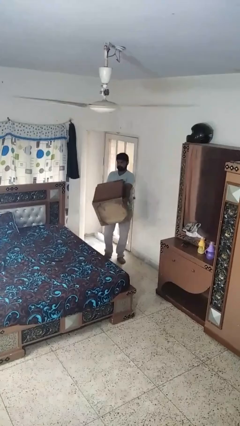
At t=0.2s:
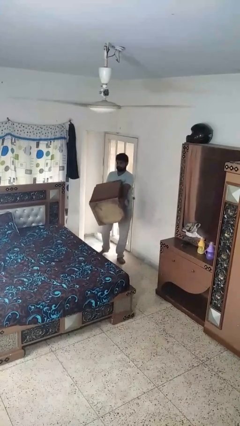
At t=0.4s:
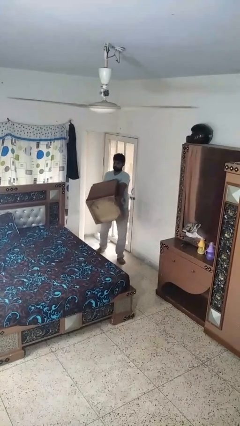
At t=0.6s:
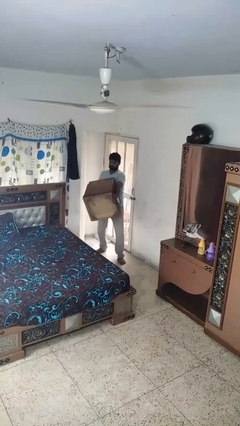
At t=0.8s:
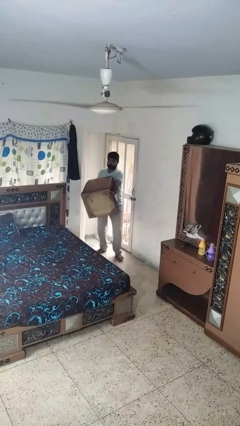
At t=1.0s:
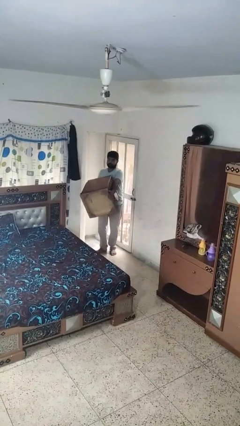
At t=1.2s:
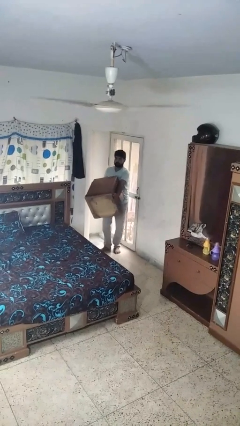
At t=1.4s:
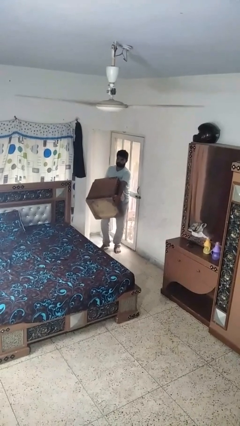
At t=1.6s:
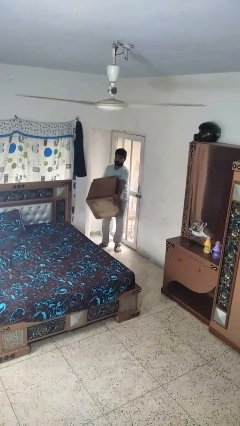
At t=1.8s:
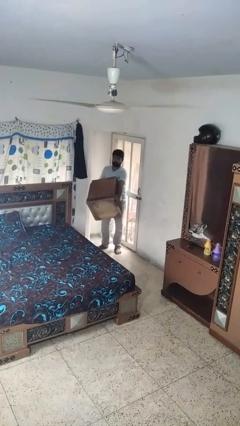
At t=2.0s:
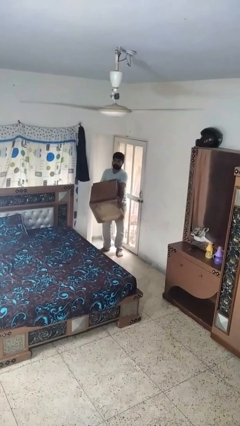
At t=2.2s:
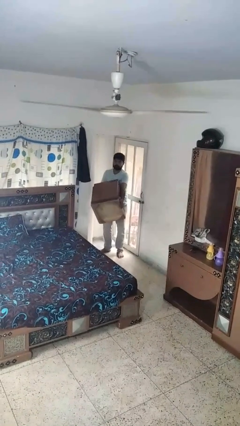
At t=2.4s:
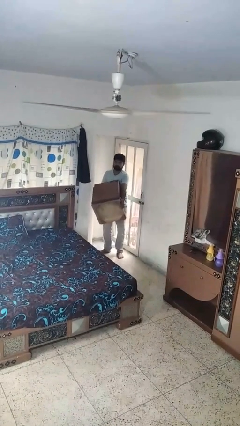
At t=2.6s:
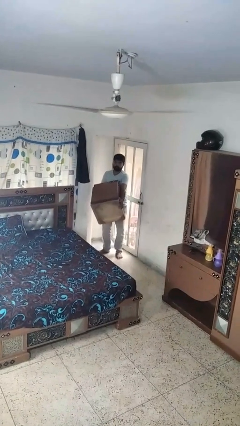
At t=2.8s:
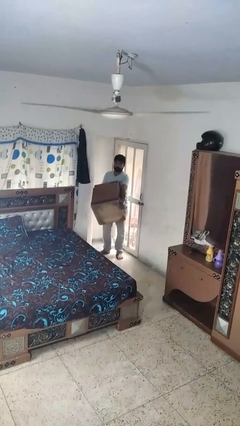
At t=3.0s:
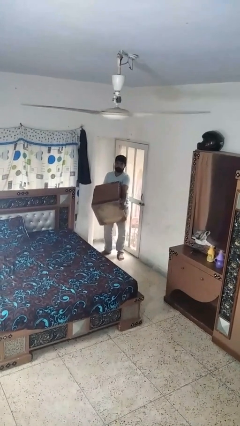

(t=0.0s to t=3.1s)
person carries furniture

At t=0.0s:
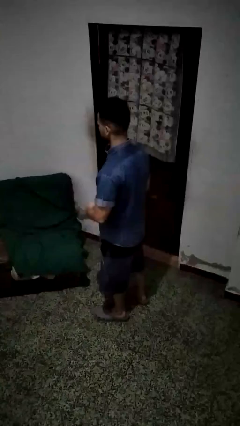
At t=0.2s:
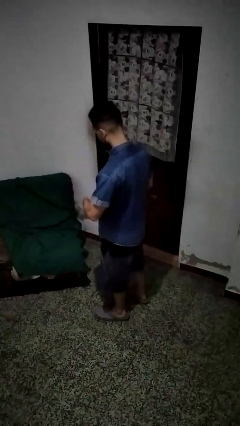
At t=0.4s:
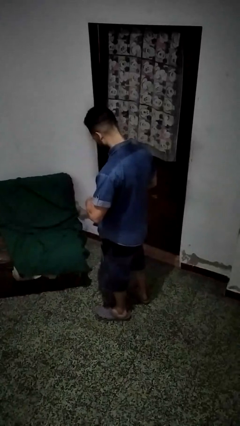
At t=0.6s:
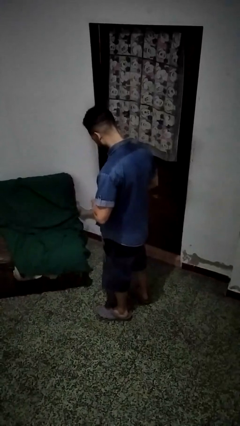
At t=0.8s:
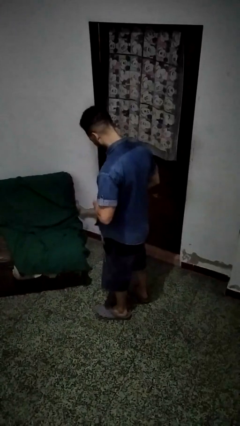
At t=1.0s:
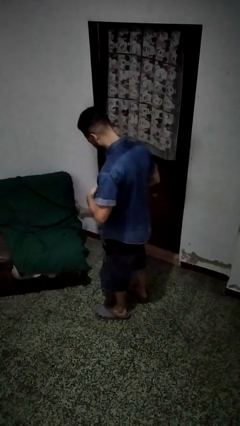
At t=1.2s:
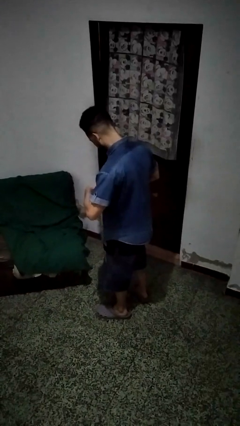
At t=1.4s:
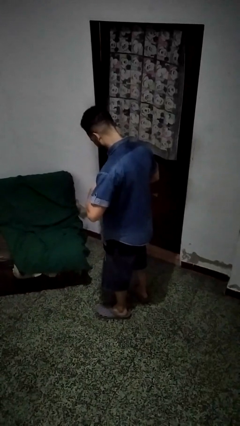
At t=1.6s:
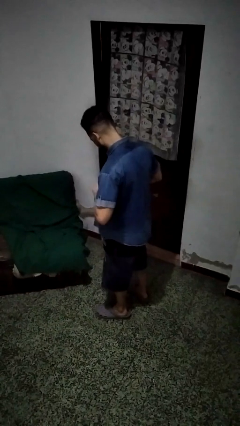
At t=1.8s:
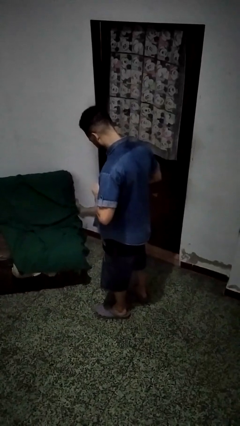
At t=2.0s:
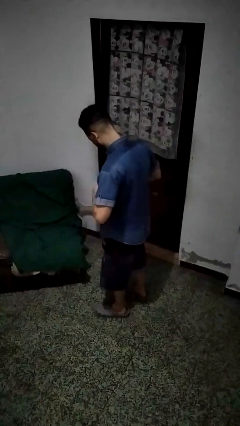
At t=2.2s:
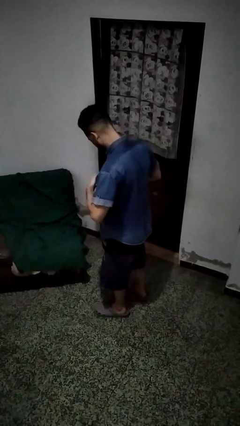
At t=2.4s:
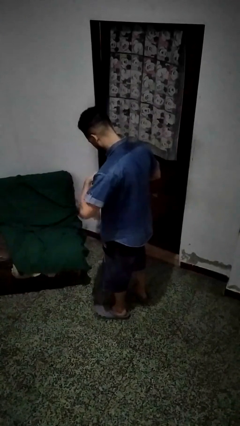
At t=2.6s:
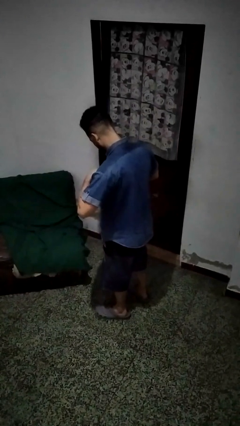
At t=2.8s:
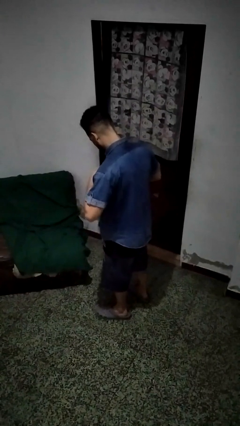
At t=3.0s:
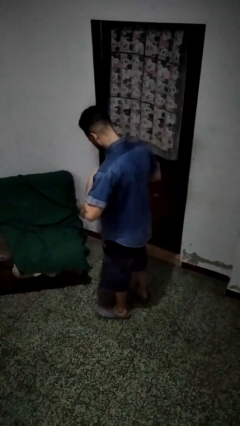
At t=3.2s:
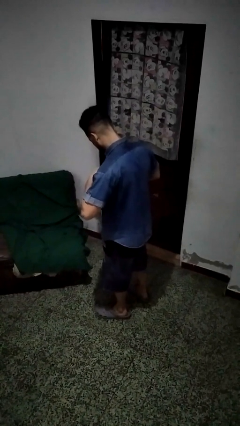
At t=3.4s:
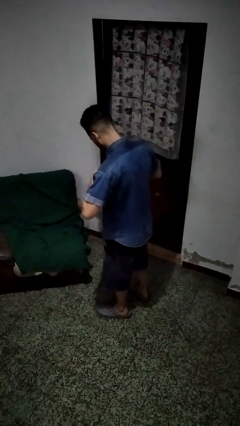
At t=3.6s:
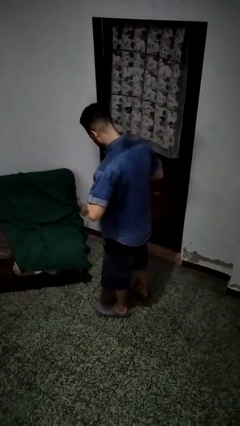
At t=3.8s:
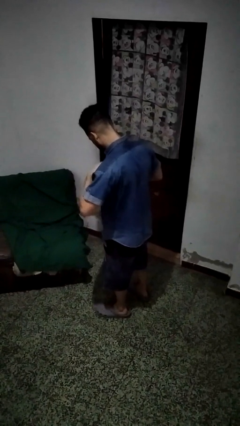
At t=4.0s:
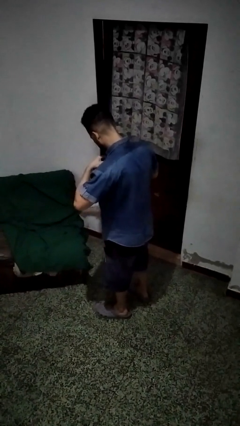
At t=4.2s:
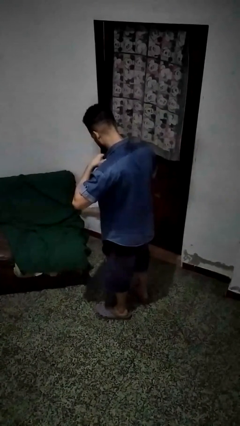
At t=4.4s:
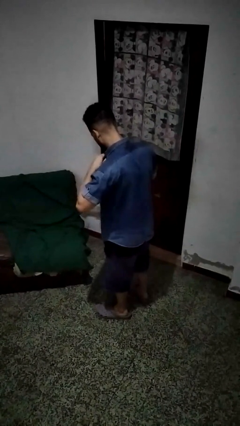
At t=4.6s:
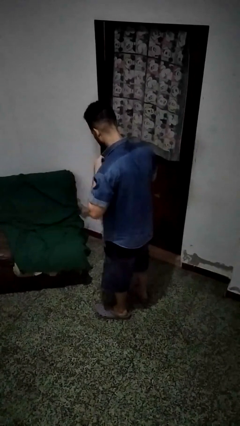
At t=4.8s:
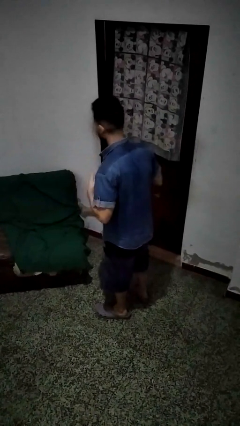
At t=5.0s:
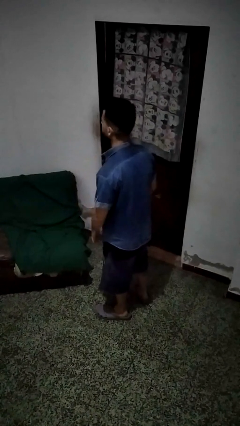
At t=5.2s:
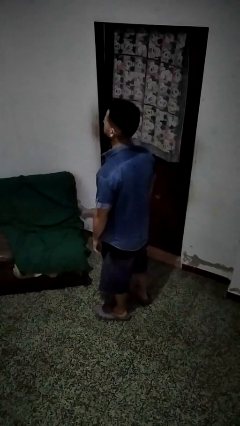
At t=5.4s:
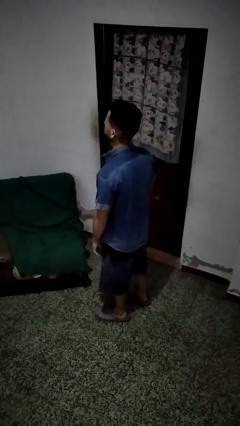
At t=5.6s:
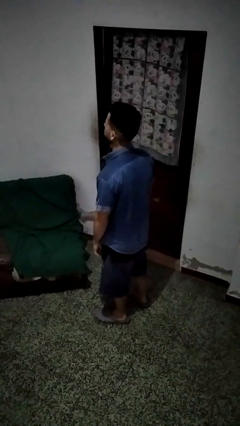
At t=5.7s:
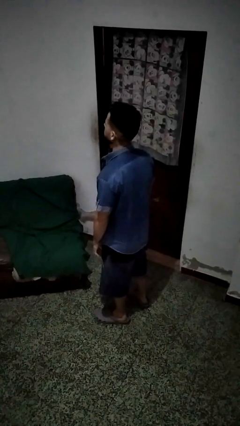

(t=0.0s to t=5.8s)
person unbuttons shirt

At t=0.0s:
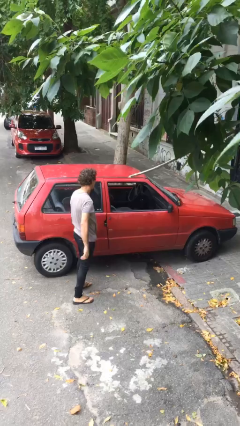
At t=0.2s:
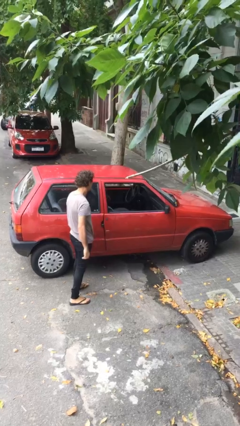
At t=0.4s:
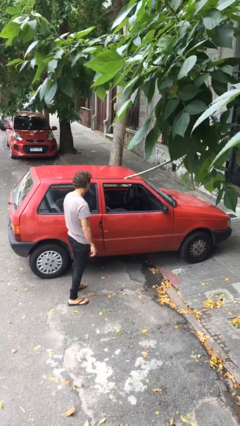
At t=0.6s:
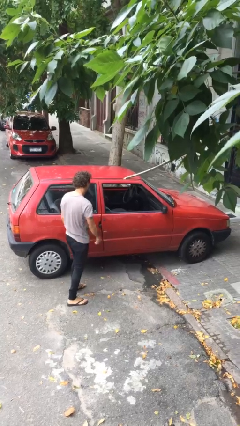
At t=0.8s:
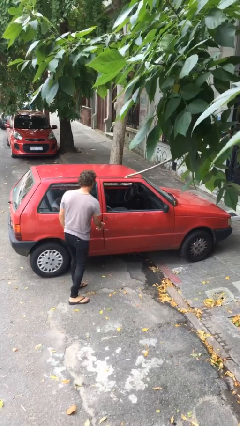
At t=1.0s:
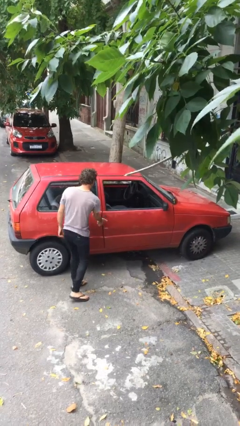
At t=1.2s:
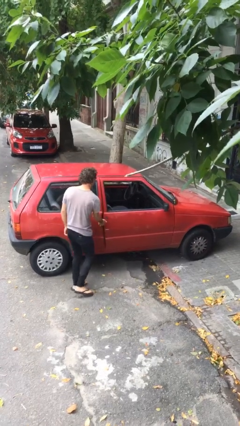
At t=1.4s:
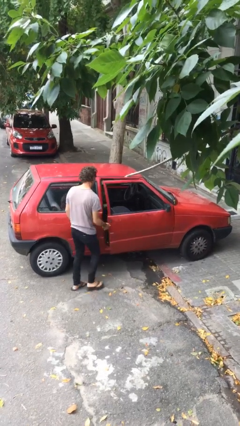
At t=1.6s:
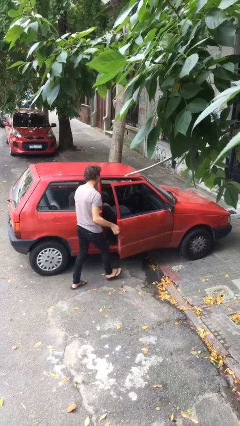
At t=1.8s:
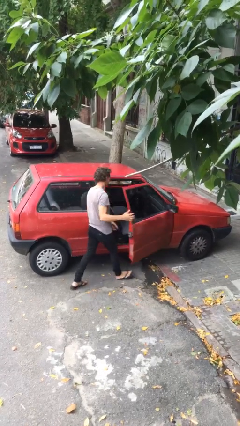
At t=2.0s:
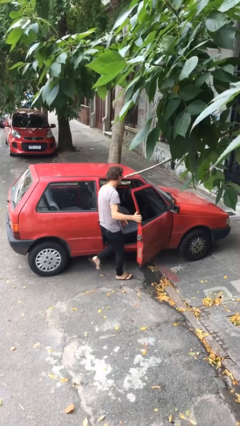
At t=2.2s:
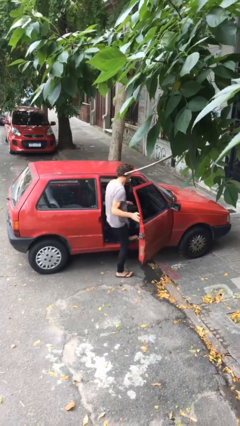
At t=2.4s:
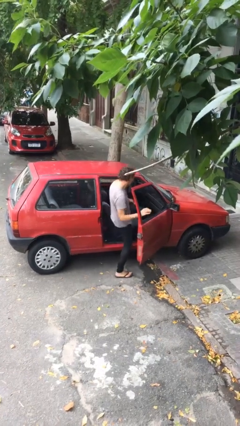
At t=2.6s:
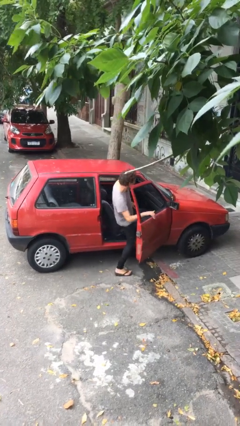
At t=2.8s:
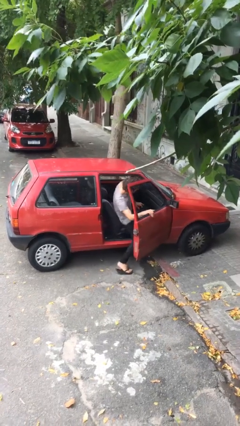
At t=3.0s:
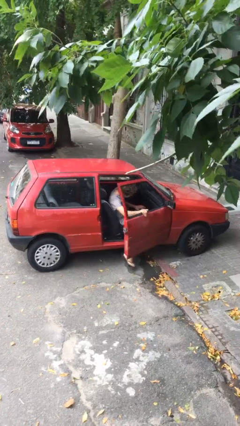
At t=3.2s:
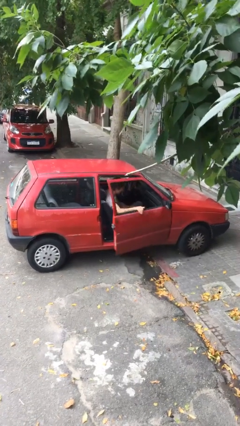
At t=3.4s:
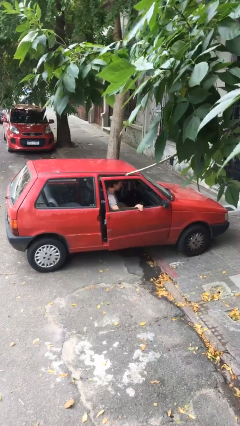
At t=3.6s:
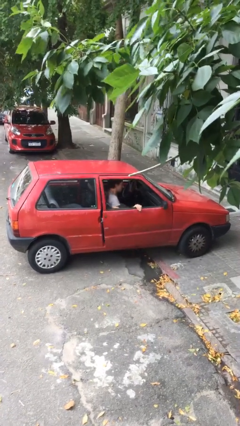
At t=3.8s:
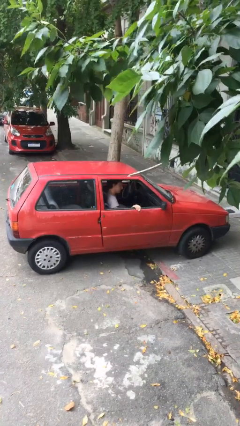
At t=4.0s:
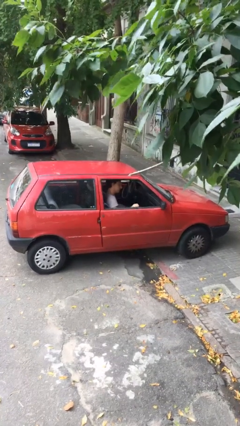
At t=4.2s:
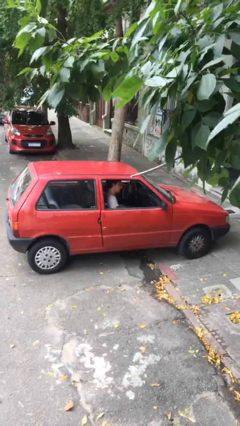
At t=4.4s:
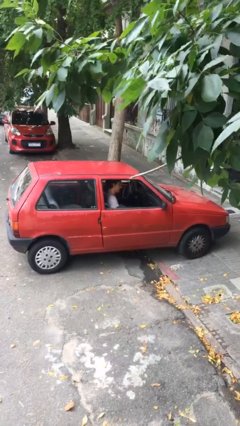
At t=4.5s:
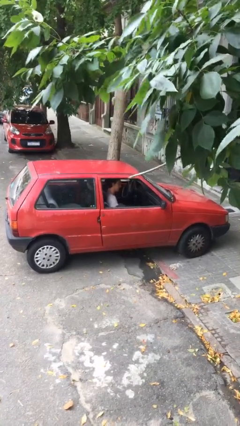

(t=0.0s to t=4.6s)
car picks up person

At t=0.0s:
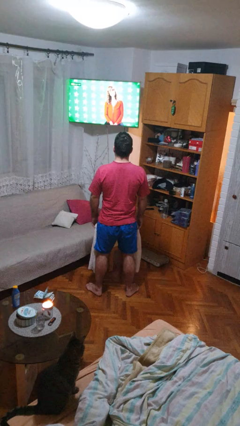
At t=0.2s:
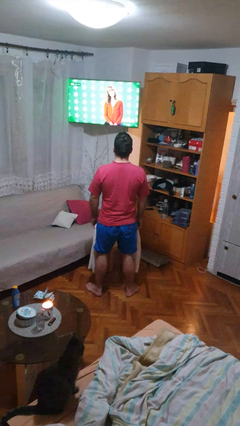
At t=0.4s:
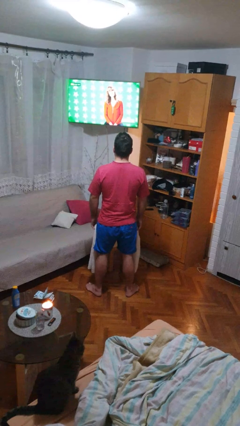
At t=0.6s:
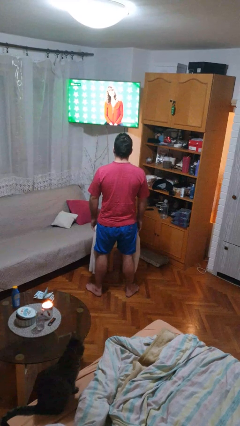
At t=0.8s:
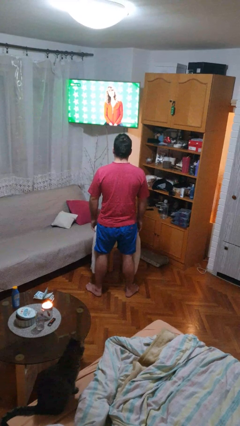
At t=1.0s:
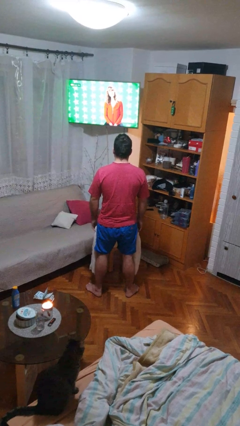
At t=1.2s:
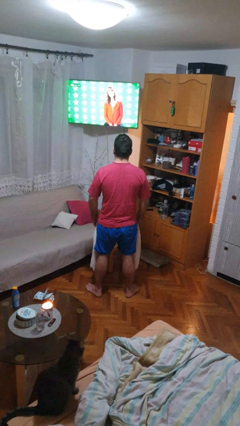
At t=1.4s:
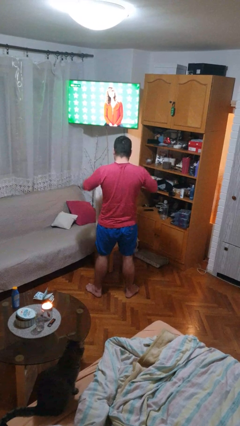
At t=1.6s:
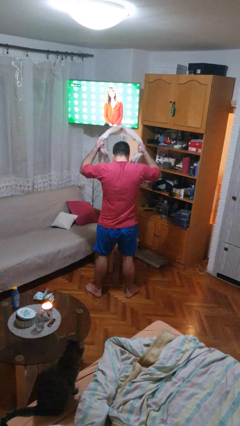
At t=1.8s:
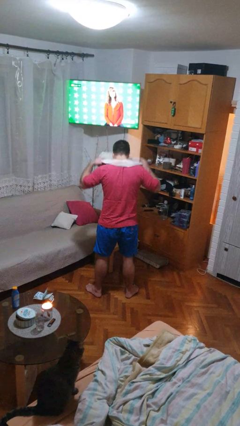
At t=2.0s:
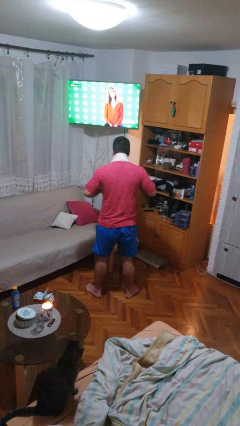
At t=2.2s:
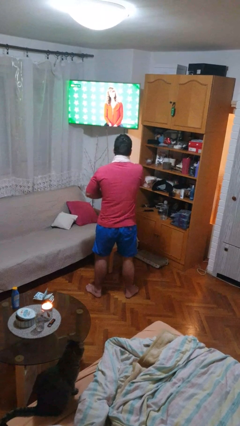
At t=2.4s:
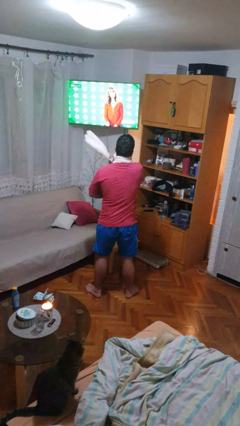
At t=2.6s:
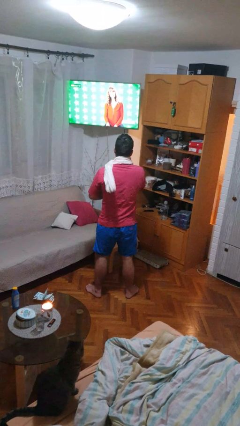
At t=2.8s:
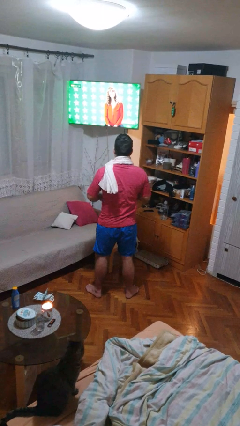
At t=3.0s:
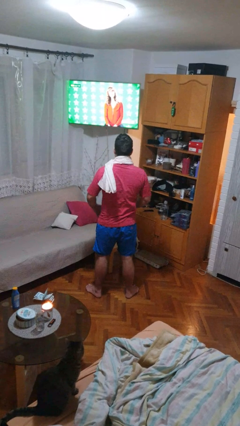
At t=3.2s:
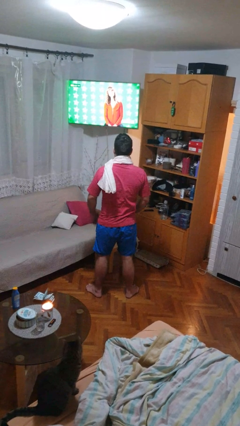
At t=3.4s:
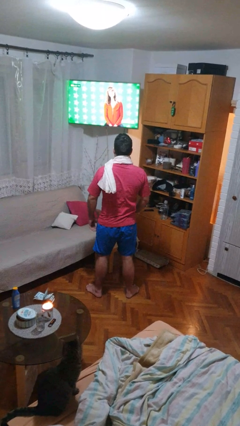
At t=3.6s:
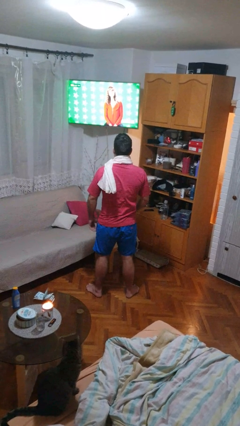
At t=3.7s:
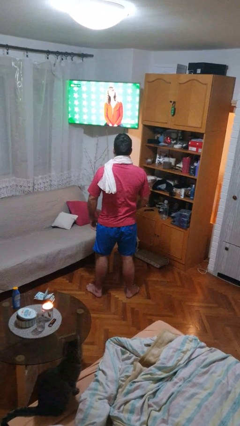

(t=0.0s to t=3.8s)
person puts on scarf

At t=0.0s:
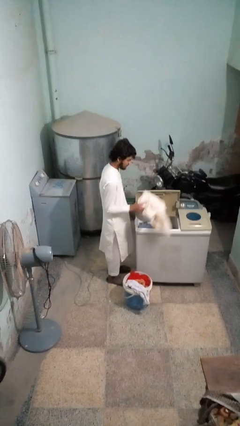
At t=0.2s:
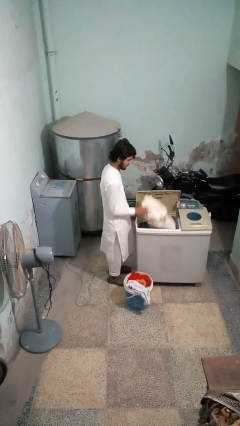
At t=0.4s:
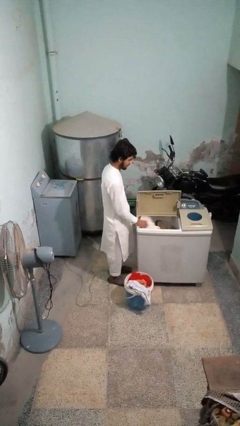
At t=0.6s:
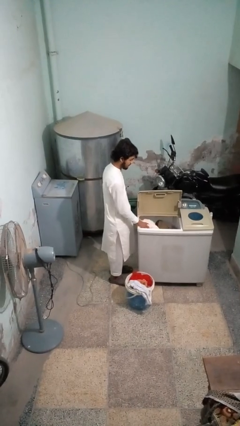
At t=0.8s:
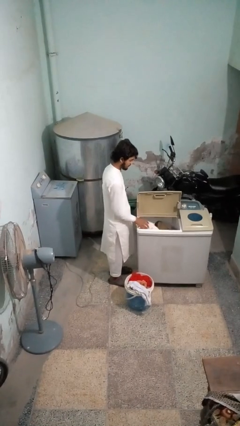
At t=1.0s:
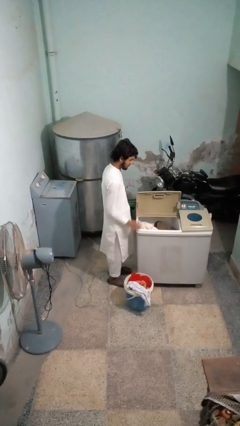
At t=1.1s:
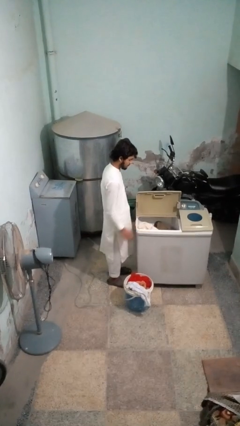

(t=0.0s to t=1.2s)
person loads clotheswasher
